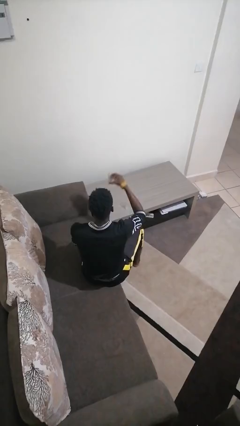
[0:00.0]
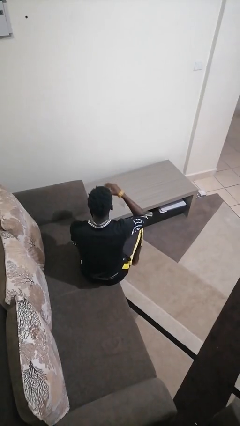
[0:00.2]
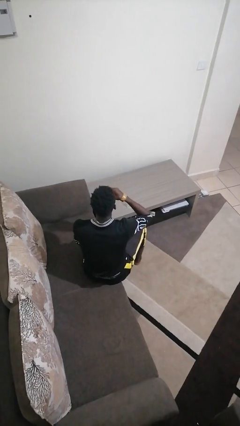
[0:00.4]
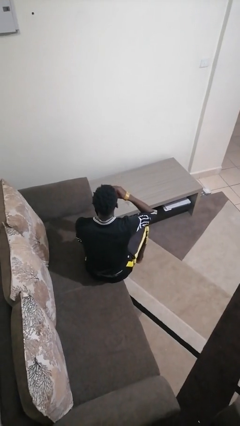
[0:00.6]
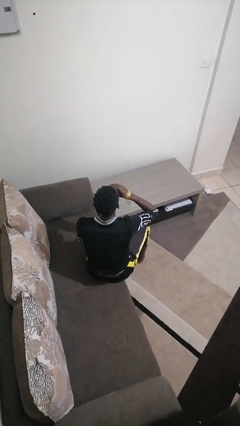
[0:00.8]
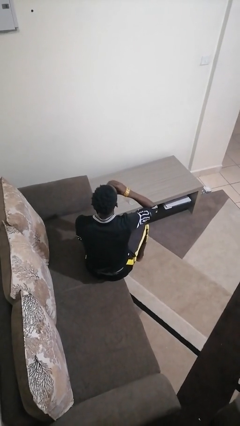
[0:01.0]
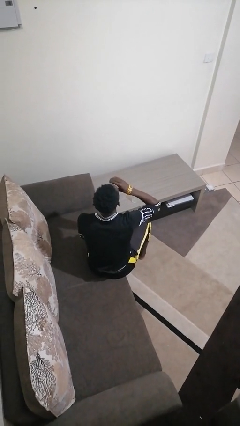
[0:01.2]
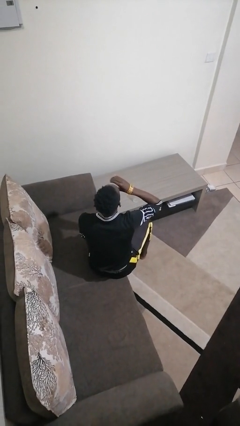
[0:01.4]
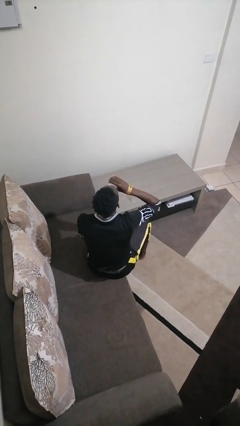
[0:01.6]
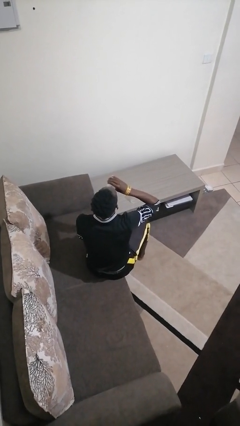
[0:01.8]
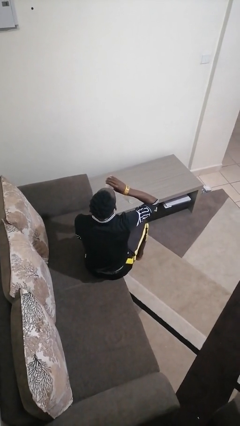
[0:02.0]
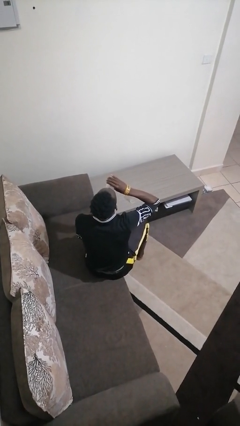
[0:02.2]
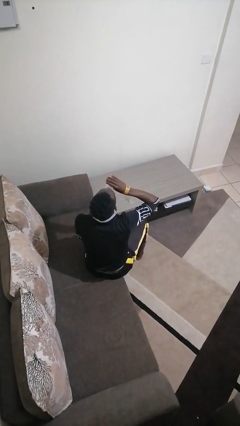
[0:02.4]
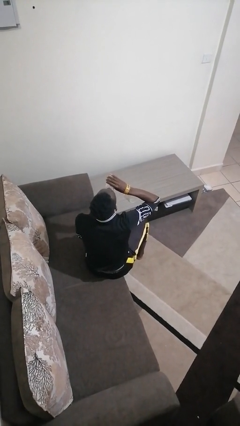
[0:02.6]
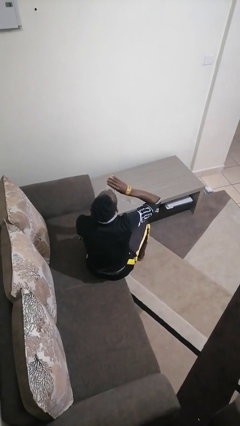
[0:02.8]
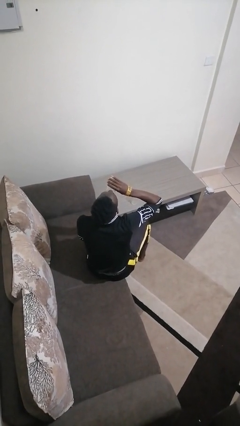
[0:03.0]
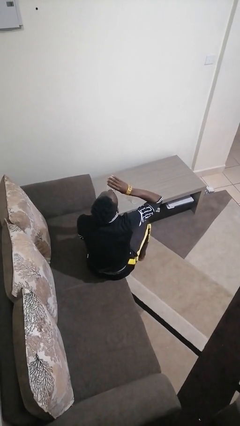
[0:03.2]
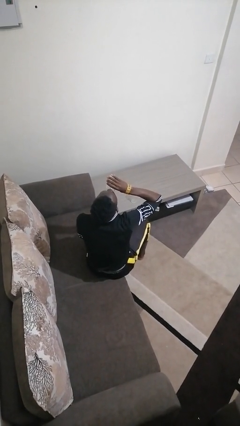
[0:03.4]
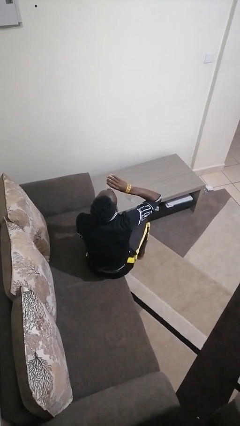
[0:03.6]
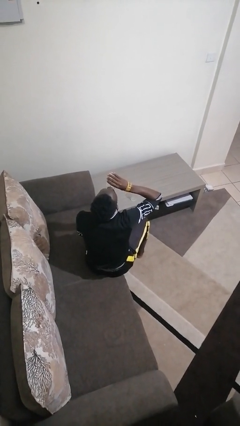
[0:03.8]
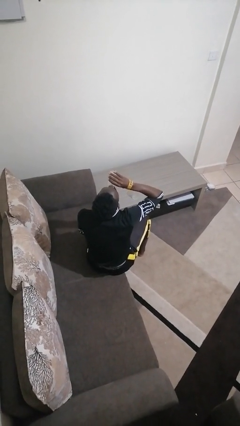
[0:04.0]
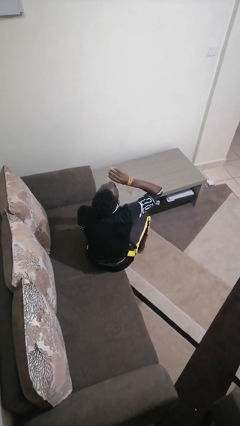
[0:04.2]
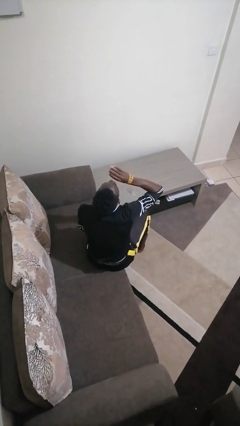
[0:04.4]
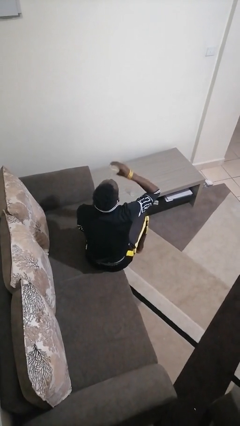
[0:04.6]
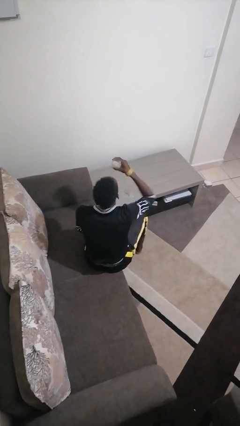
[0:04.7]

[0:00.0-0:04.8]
person drinks from shotglass

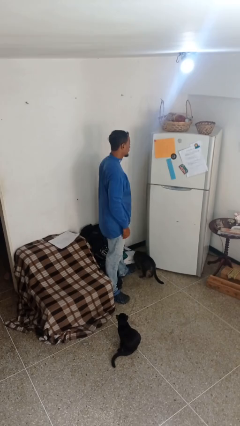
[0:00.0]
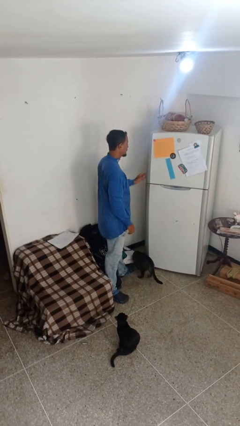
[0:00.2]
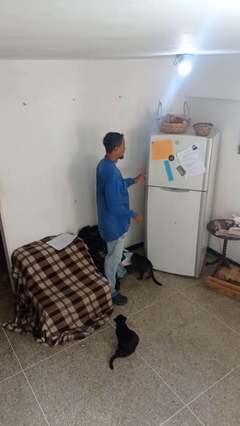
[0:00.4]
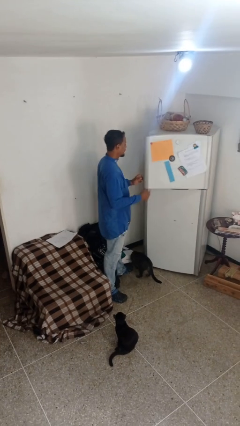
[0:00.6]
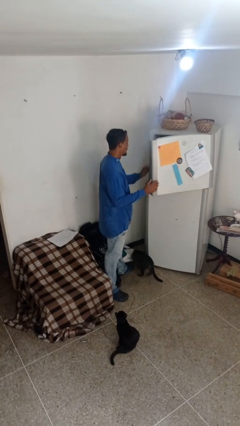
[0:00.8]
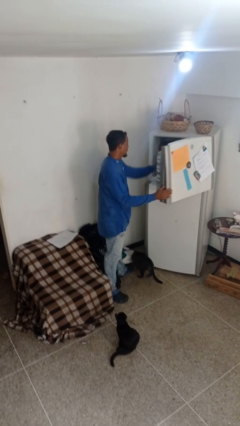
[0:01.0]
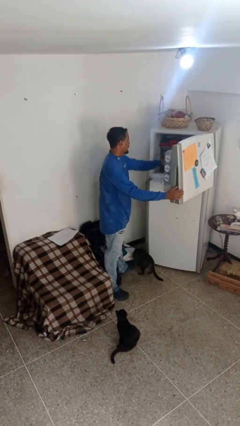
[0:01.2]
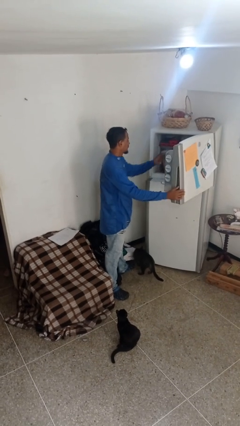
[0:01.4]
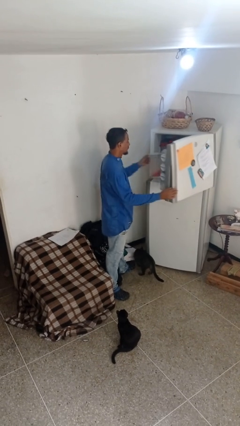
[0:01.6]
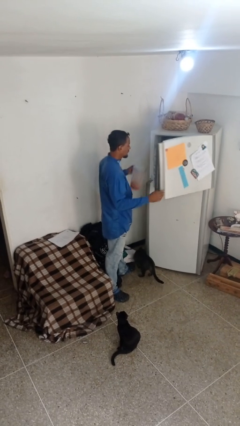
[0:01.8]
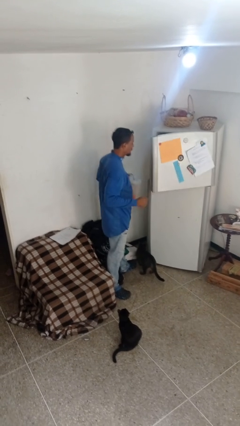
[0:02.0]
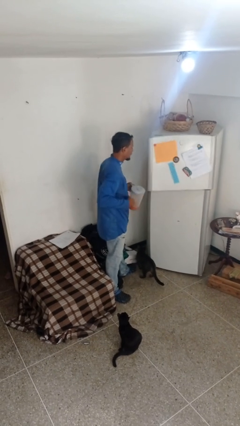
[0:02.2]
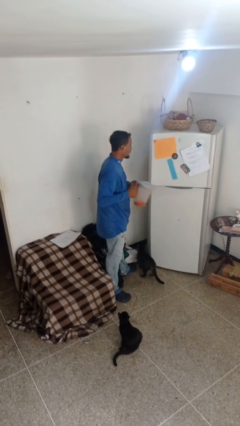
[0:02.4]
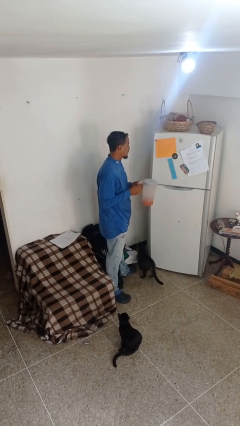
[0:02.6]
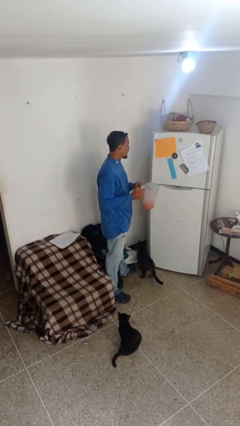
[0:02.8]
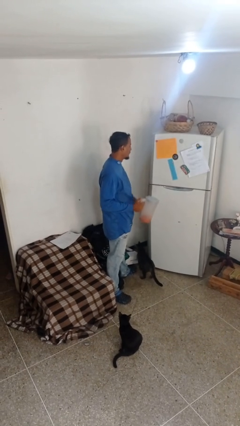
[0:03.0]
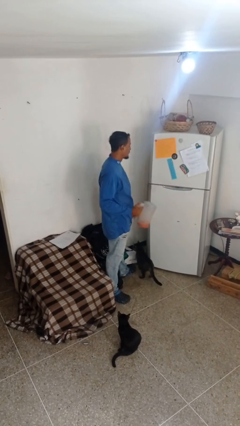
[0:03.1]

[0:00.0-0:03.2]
person takes object from refrigerator

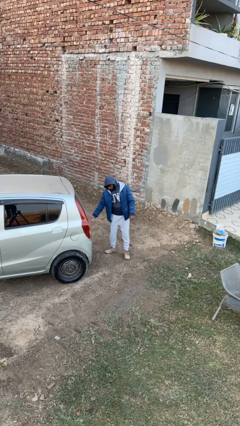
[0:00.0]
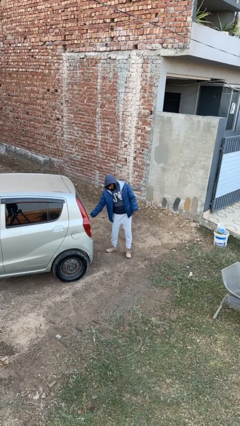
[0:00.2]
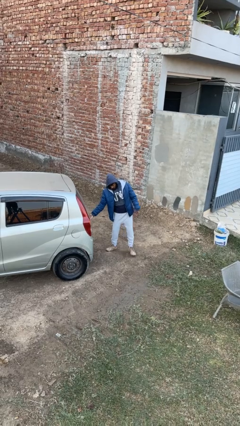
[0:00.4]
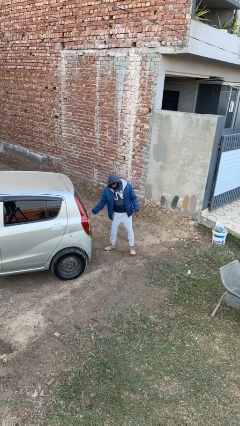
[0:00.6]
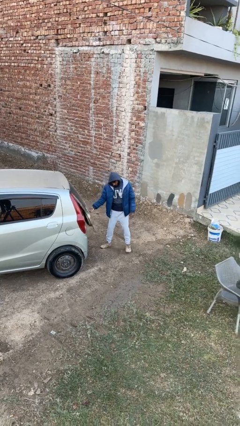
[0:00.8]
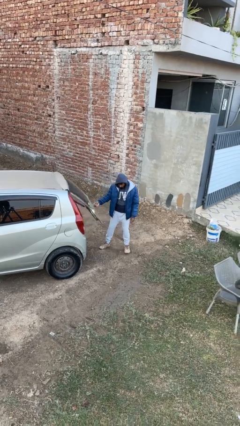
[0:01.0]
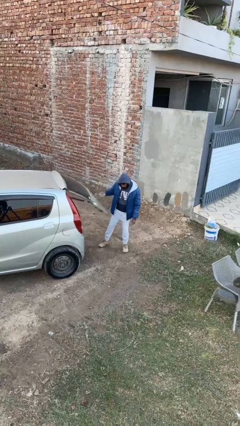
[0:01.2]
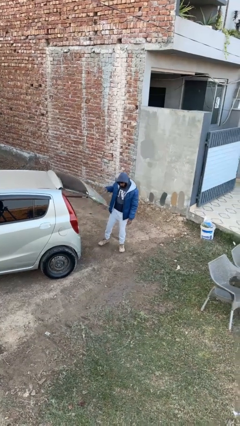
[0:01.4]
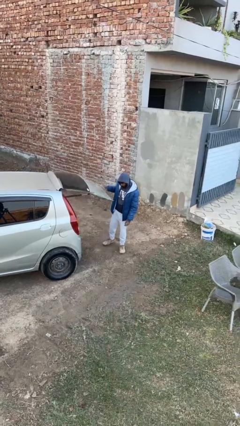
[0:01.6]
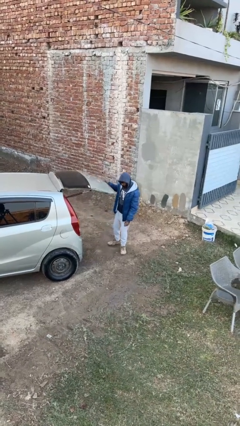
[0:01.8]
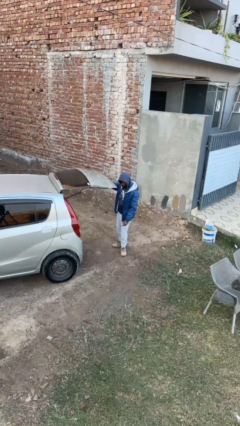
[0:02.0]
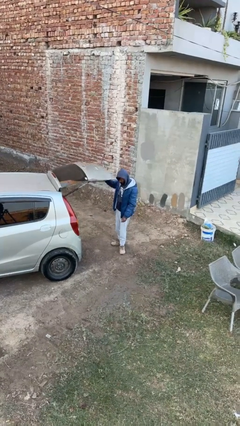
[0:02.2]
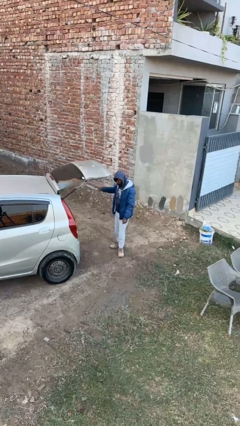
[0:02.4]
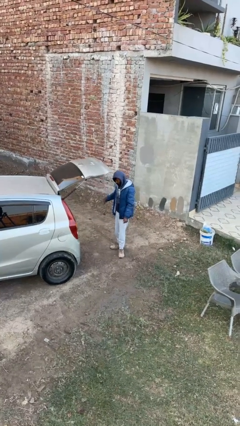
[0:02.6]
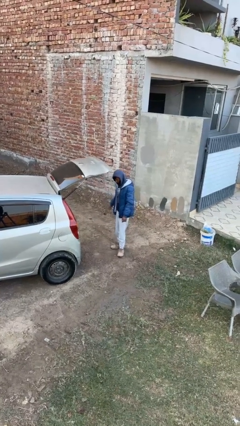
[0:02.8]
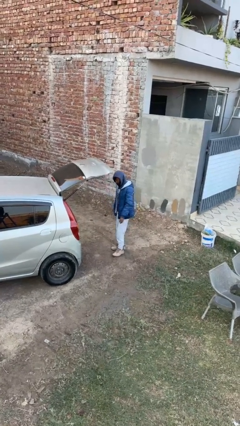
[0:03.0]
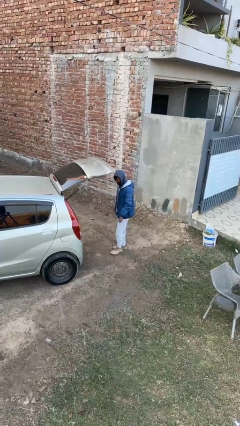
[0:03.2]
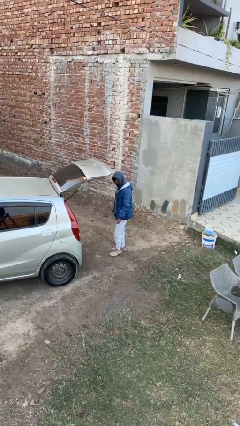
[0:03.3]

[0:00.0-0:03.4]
person opens car trunk

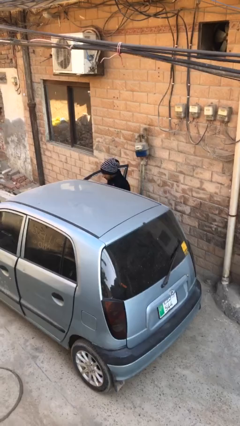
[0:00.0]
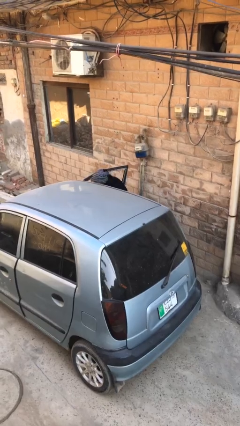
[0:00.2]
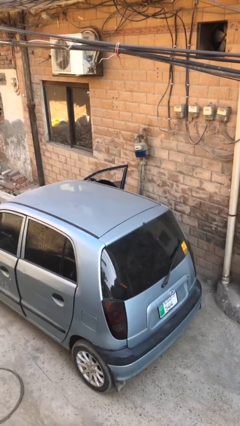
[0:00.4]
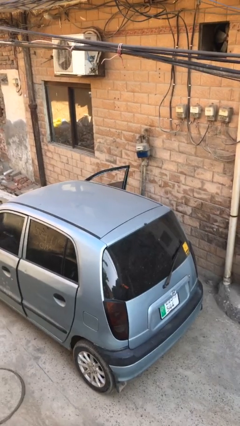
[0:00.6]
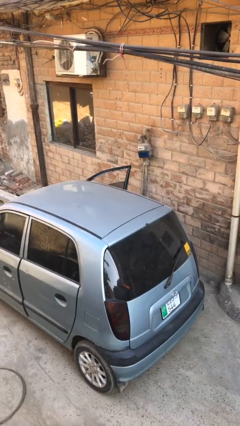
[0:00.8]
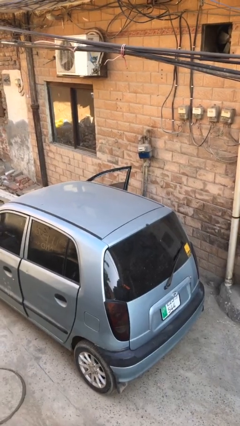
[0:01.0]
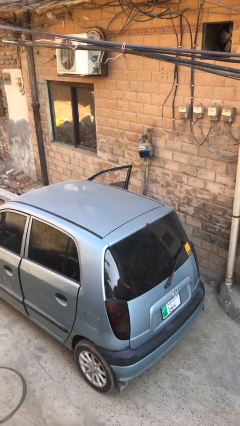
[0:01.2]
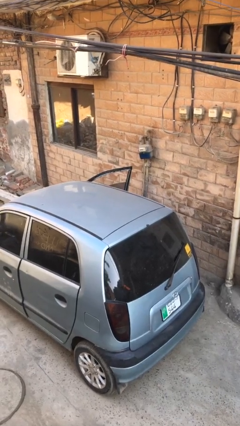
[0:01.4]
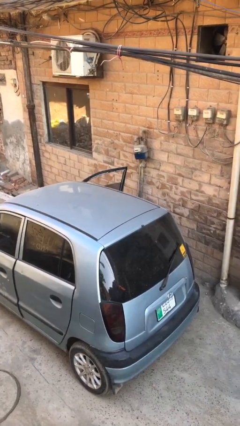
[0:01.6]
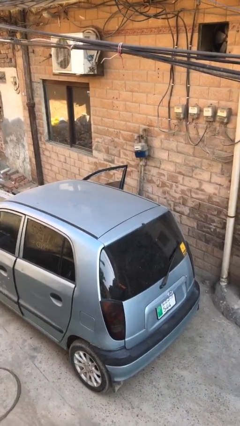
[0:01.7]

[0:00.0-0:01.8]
person enters car

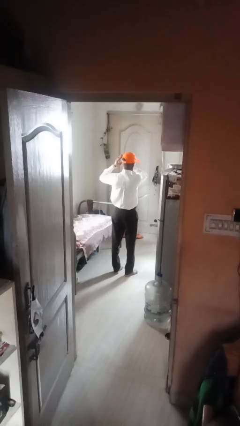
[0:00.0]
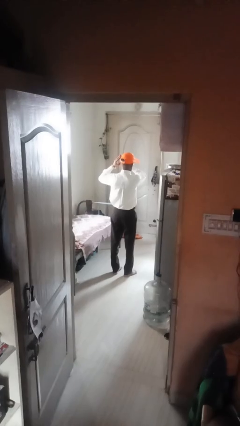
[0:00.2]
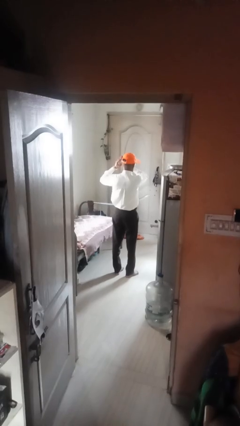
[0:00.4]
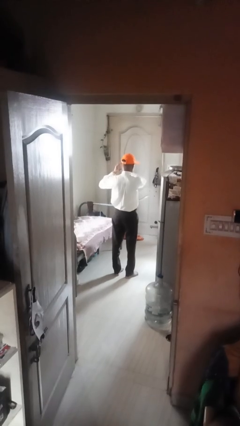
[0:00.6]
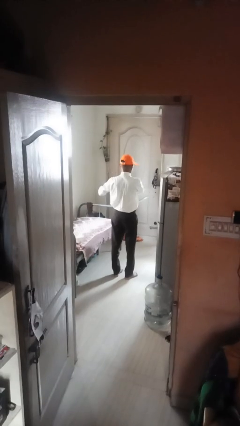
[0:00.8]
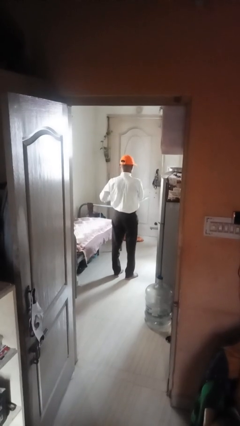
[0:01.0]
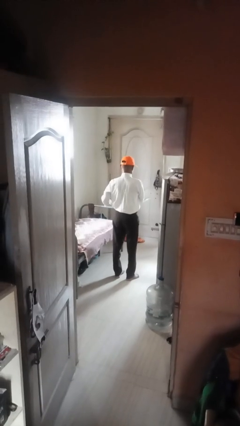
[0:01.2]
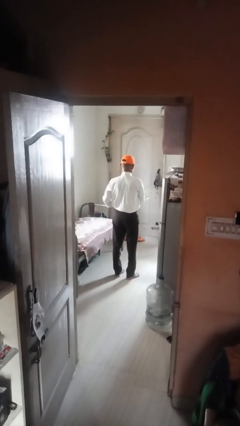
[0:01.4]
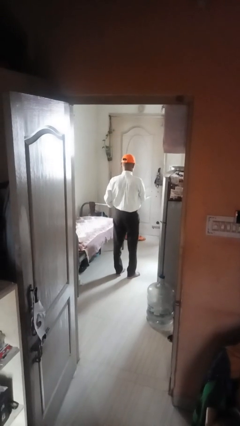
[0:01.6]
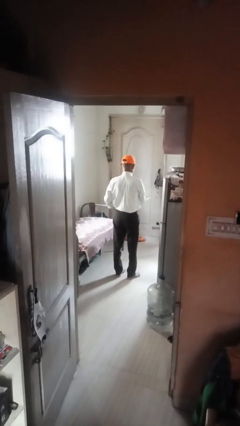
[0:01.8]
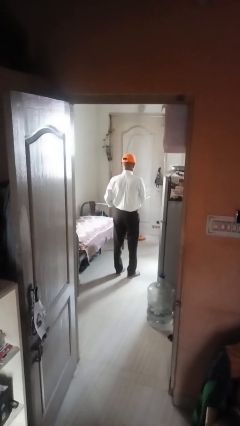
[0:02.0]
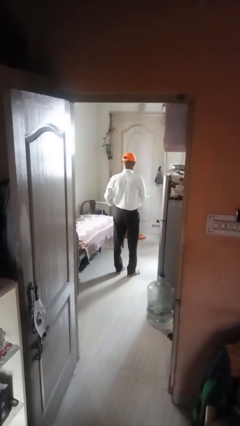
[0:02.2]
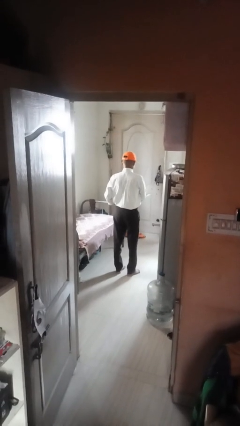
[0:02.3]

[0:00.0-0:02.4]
person gestures heart

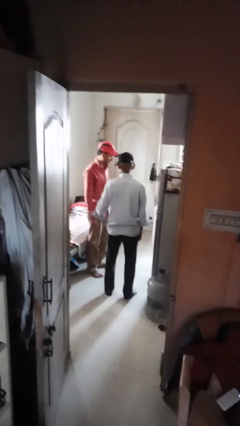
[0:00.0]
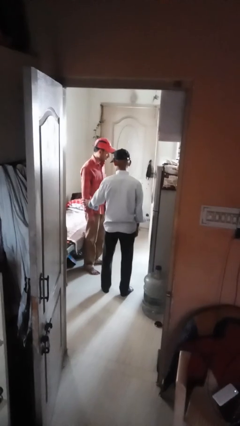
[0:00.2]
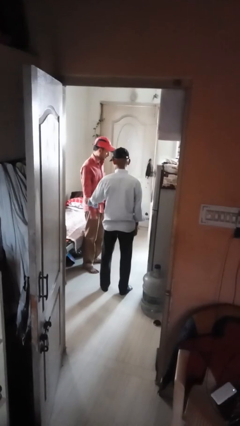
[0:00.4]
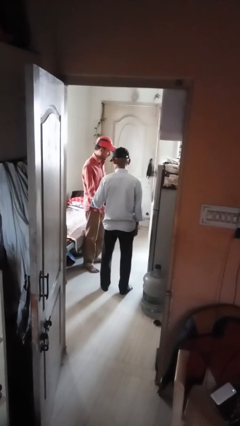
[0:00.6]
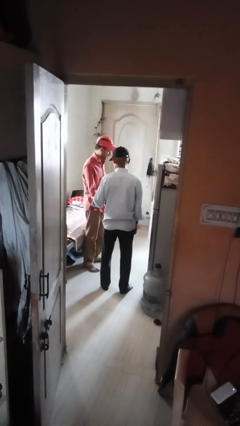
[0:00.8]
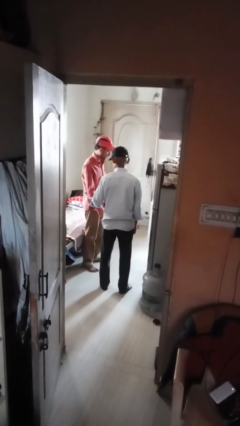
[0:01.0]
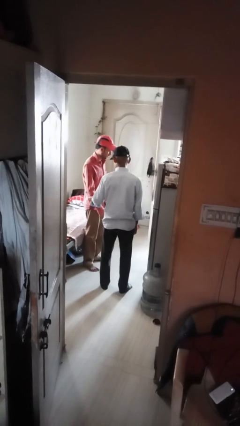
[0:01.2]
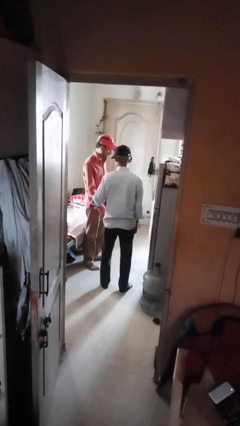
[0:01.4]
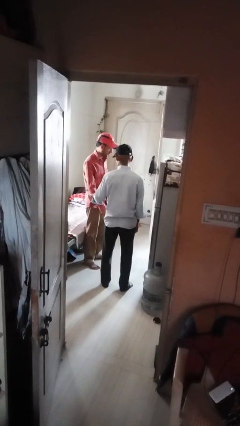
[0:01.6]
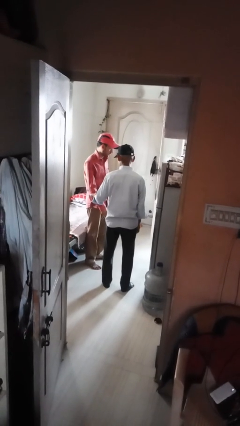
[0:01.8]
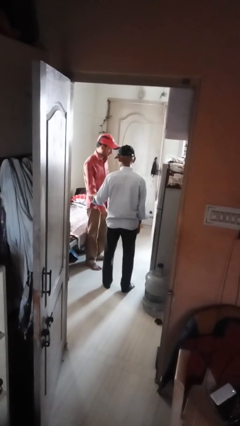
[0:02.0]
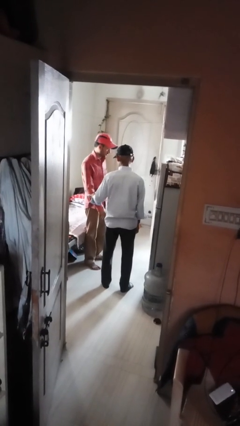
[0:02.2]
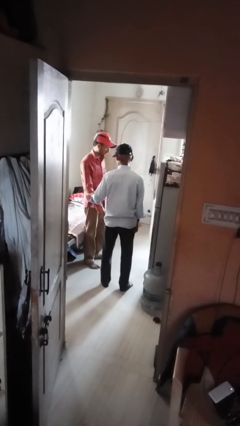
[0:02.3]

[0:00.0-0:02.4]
person grabs person by forearm
